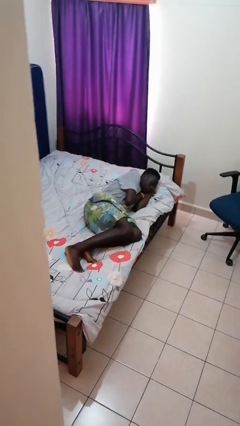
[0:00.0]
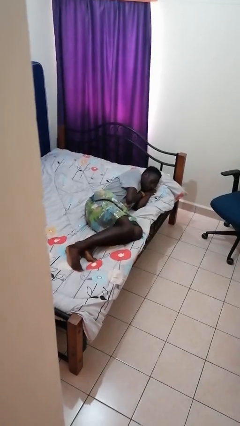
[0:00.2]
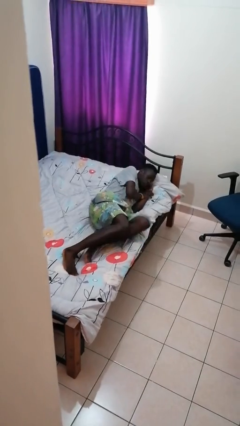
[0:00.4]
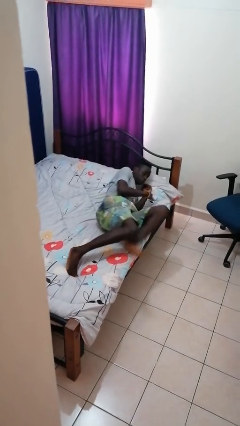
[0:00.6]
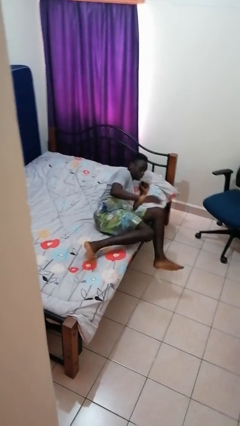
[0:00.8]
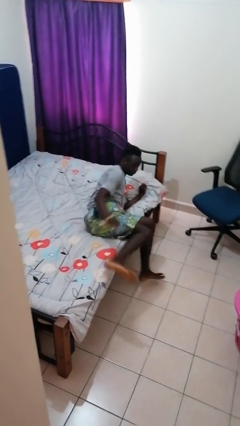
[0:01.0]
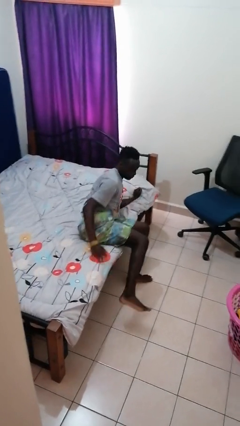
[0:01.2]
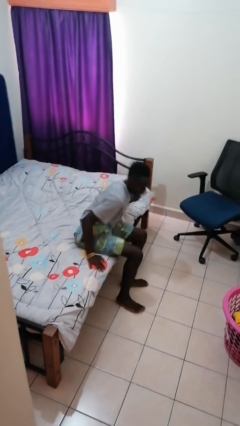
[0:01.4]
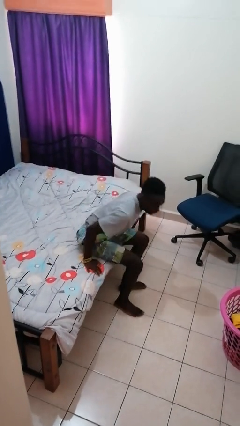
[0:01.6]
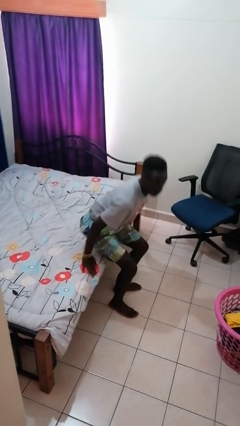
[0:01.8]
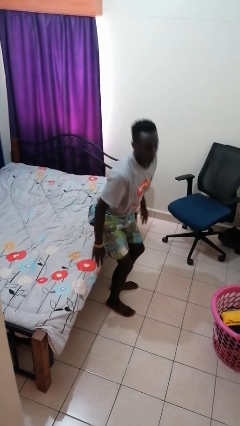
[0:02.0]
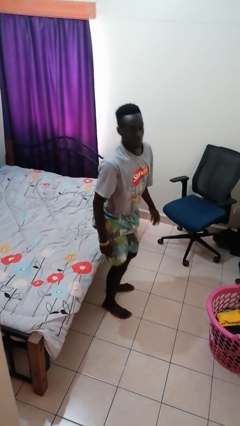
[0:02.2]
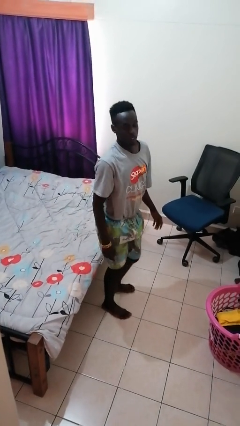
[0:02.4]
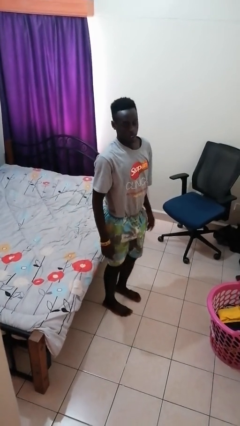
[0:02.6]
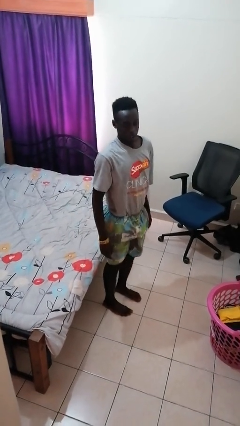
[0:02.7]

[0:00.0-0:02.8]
person stands up

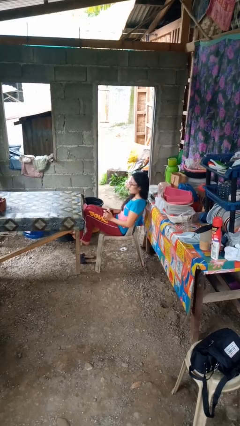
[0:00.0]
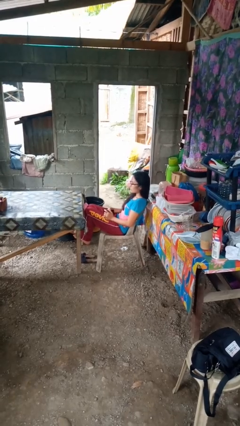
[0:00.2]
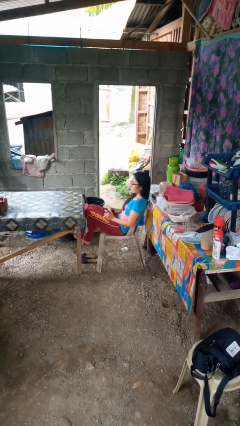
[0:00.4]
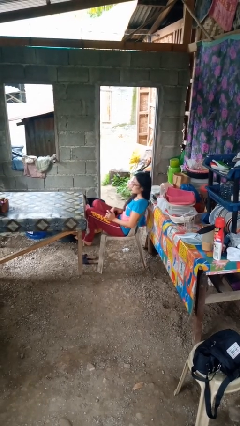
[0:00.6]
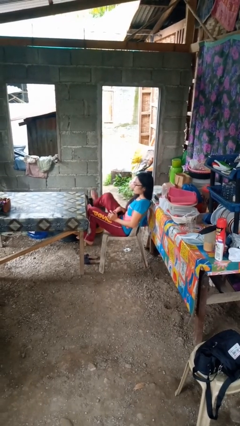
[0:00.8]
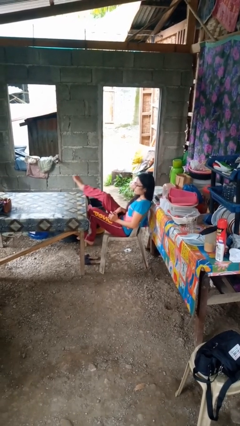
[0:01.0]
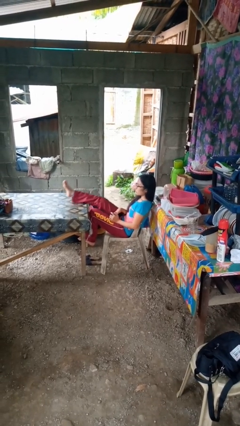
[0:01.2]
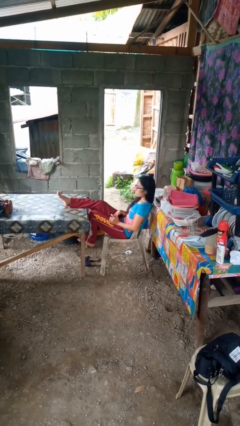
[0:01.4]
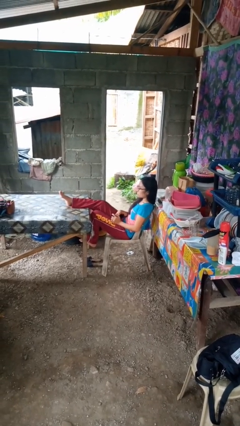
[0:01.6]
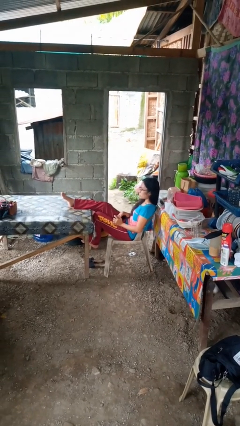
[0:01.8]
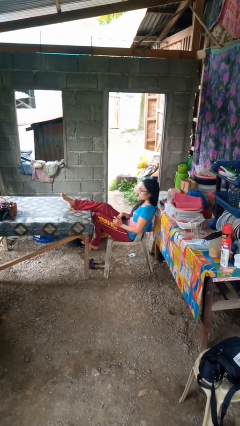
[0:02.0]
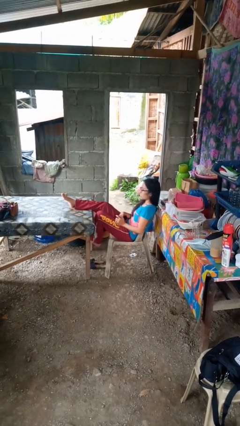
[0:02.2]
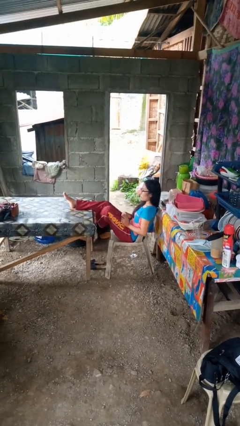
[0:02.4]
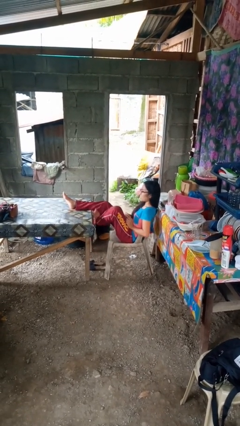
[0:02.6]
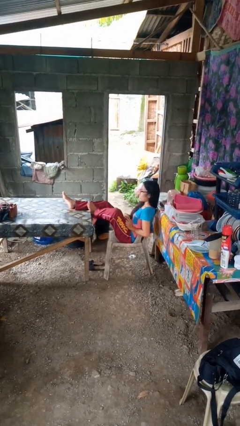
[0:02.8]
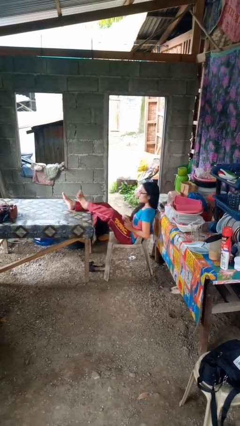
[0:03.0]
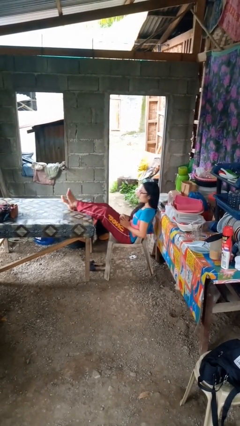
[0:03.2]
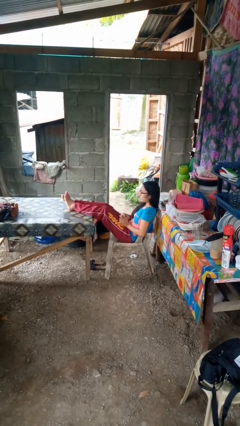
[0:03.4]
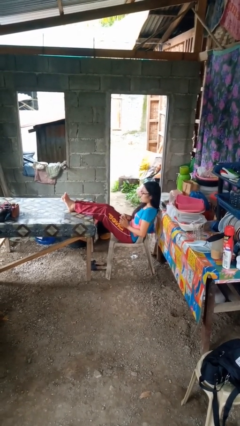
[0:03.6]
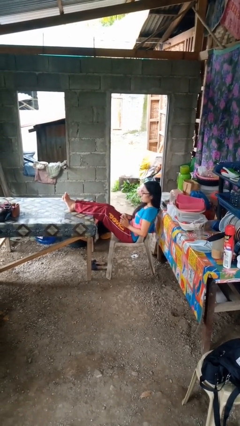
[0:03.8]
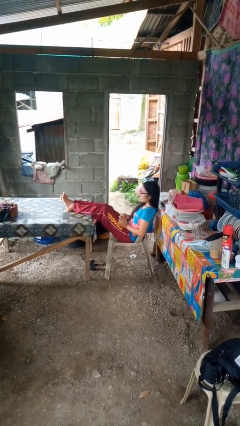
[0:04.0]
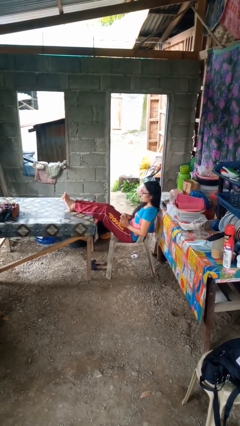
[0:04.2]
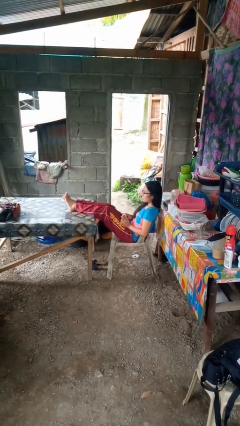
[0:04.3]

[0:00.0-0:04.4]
person puts feet up

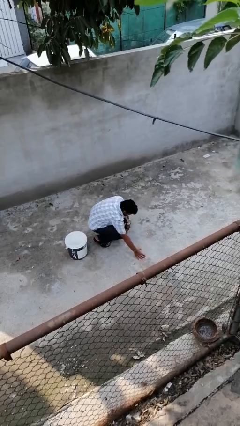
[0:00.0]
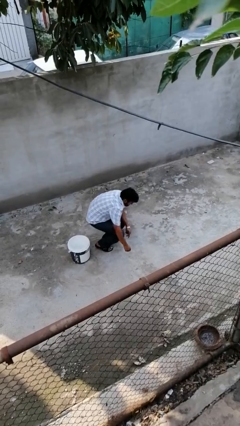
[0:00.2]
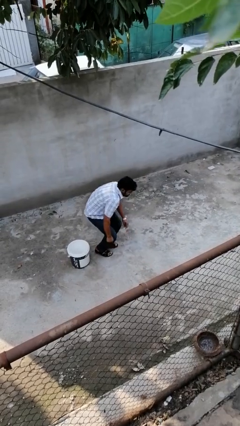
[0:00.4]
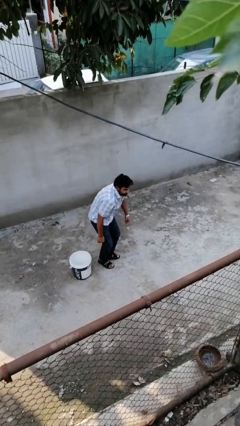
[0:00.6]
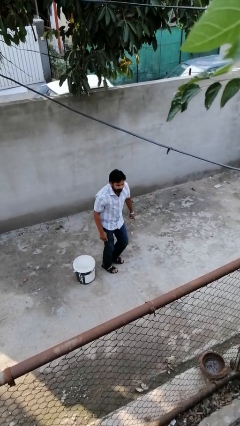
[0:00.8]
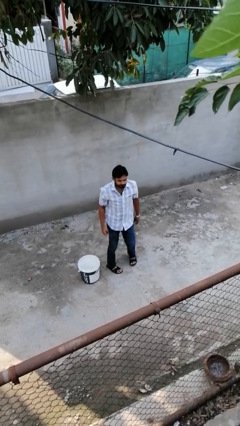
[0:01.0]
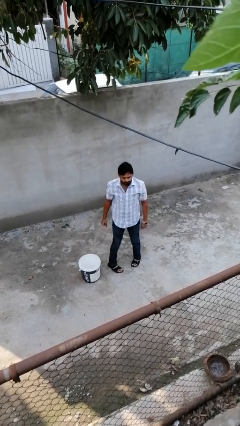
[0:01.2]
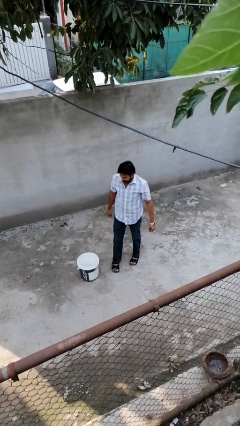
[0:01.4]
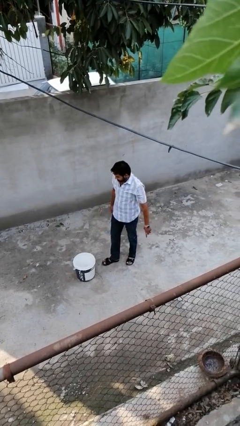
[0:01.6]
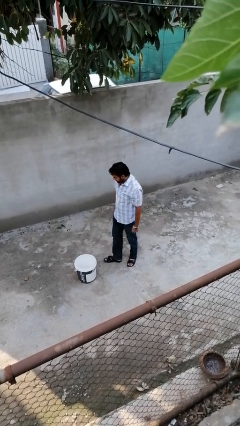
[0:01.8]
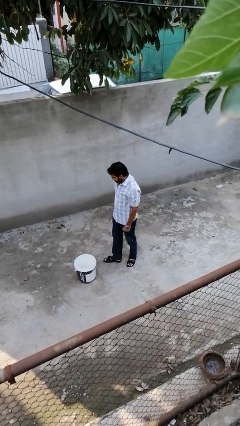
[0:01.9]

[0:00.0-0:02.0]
person stands up from floor

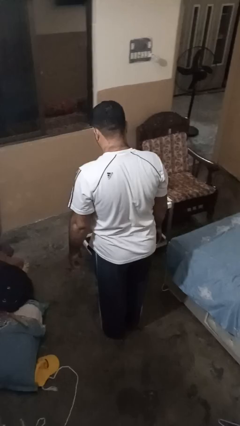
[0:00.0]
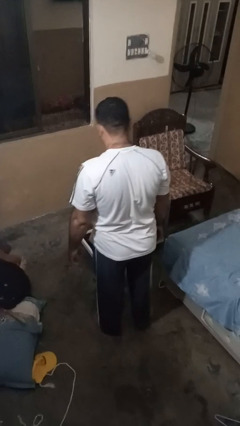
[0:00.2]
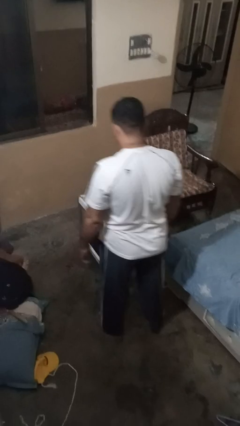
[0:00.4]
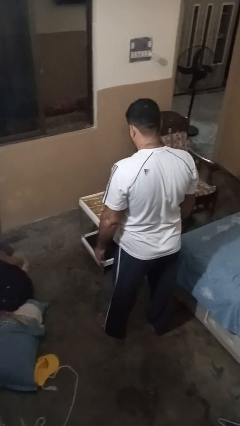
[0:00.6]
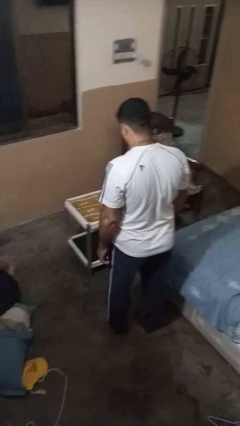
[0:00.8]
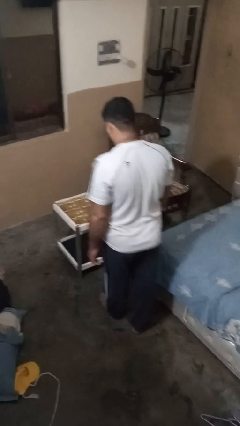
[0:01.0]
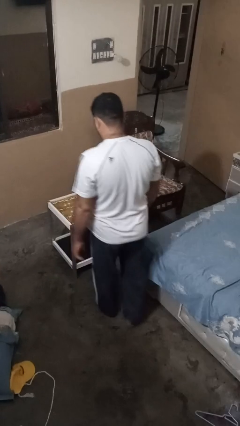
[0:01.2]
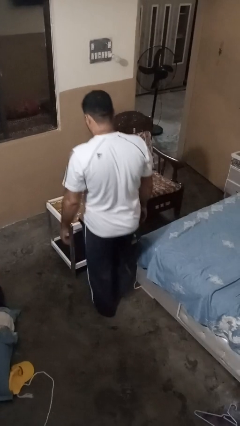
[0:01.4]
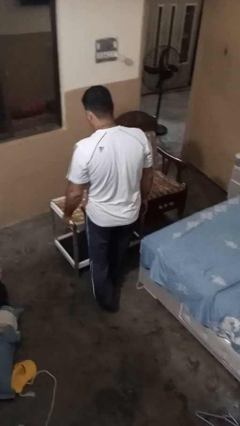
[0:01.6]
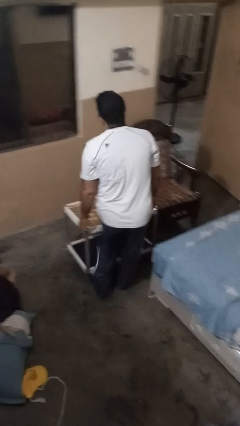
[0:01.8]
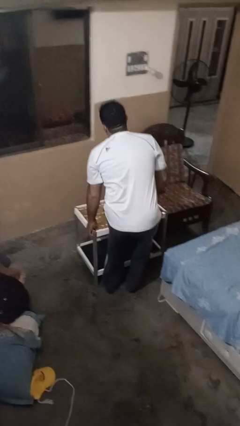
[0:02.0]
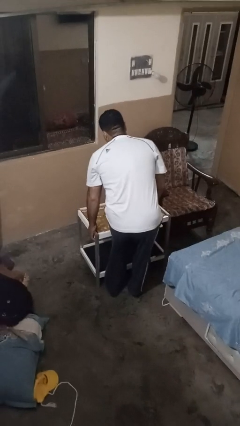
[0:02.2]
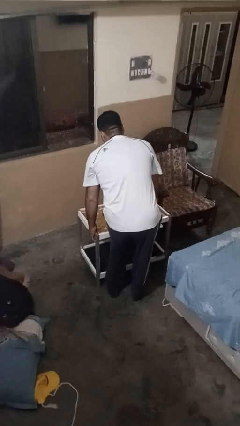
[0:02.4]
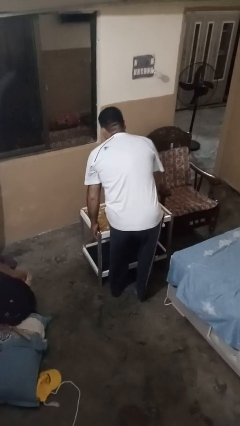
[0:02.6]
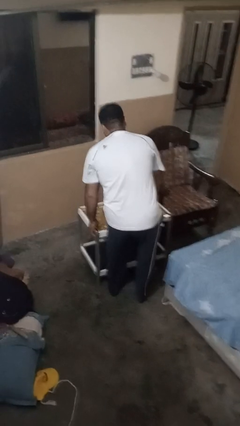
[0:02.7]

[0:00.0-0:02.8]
person bumps into table

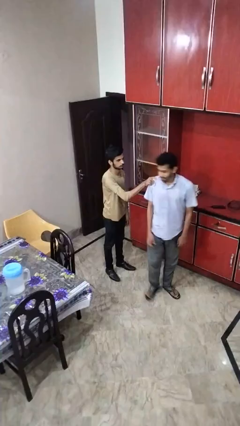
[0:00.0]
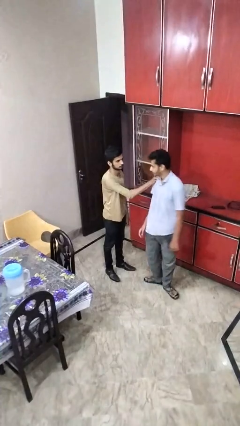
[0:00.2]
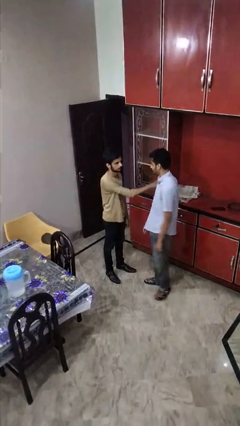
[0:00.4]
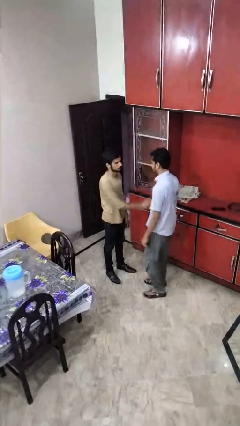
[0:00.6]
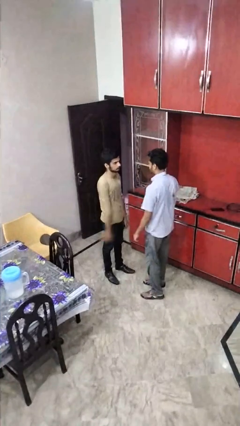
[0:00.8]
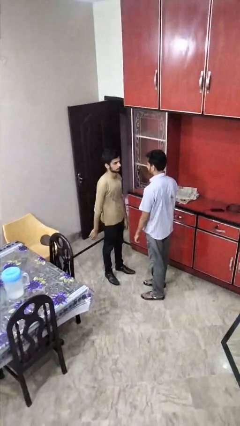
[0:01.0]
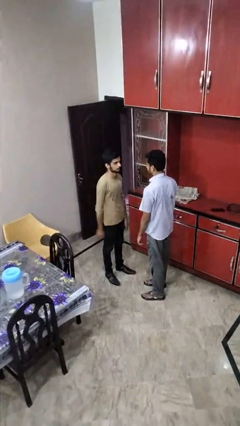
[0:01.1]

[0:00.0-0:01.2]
person spins person around

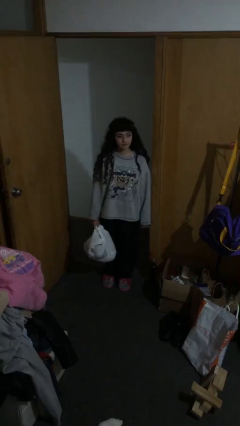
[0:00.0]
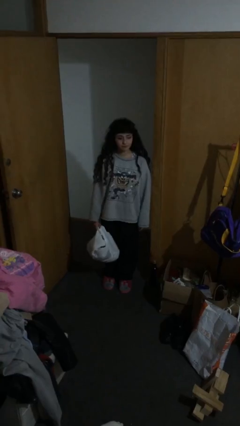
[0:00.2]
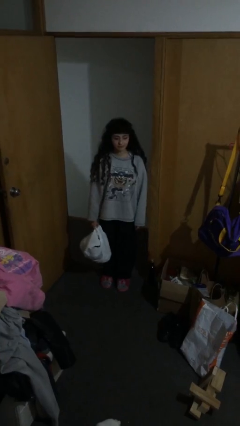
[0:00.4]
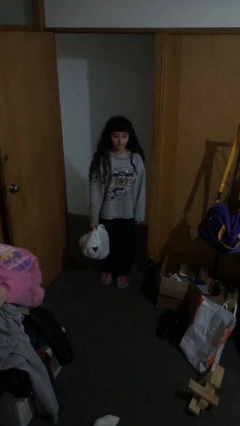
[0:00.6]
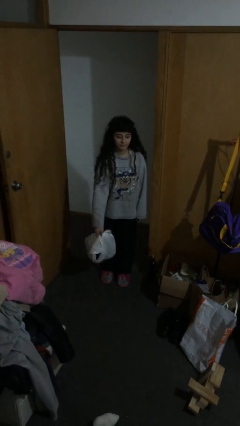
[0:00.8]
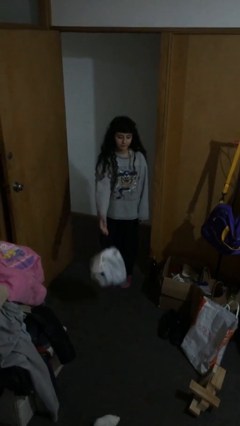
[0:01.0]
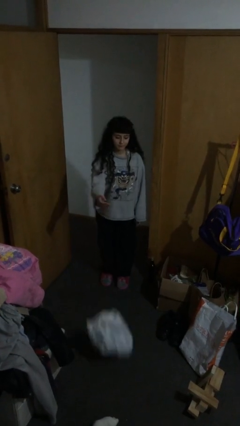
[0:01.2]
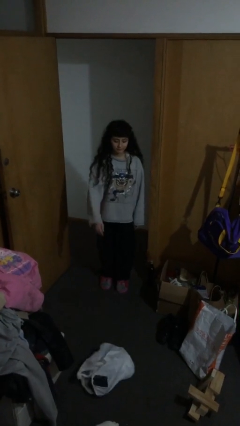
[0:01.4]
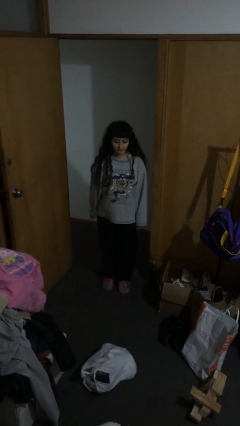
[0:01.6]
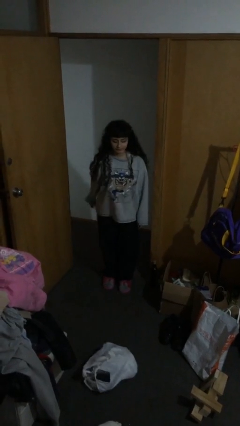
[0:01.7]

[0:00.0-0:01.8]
person throws object to ground

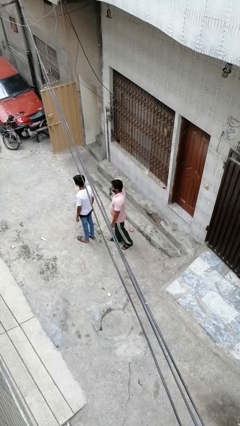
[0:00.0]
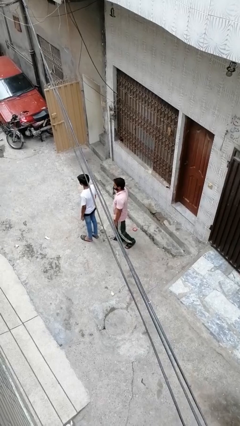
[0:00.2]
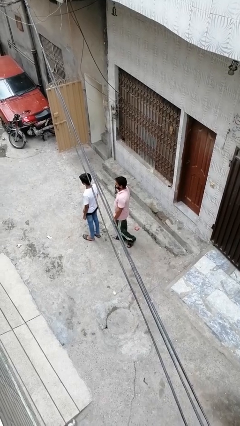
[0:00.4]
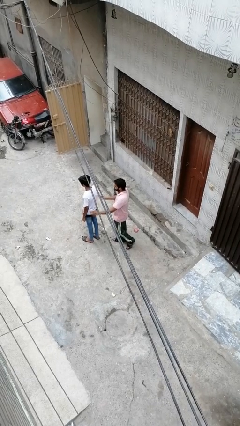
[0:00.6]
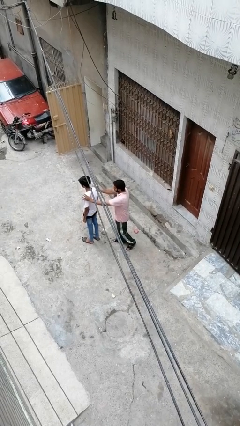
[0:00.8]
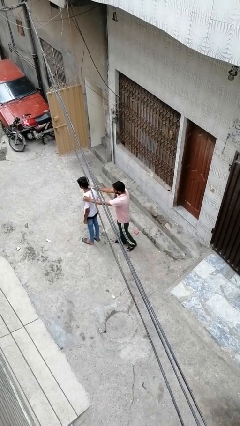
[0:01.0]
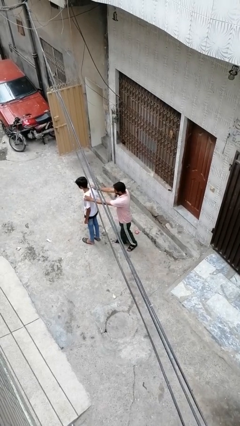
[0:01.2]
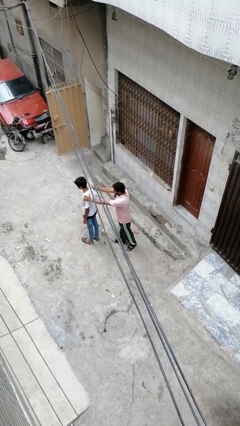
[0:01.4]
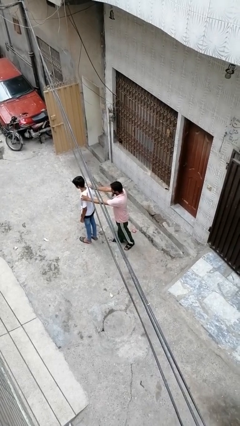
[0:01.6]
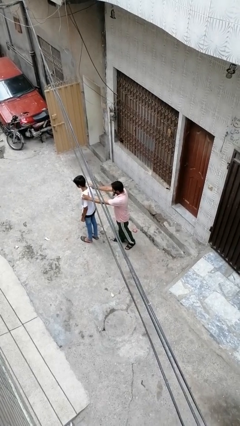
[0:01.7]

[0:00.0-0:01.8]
person grabs person by shoulder

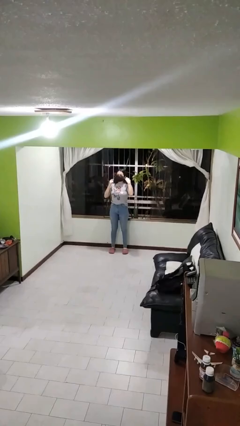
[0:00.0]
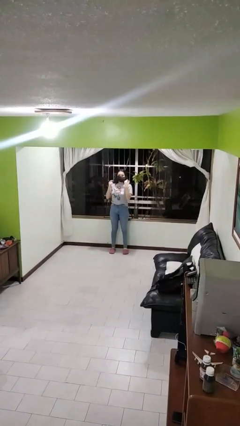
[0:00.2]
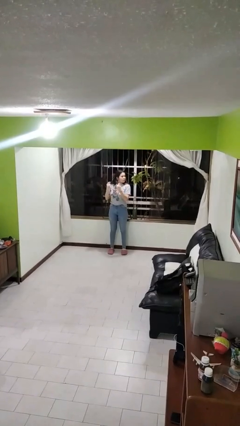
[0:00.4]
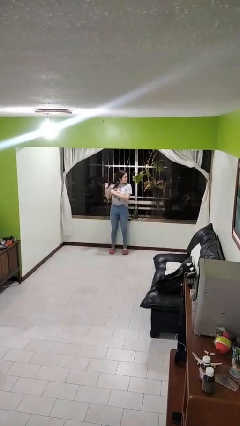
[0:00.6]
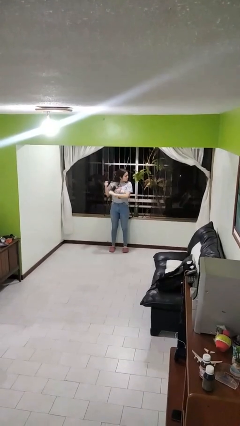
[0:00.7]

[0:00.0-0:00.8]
person takes off facemask
